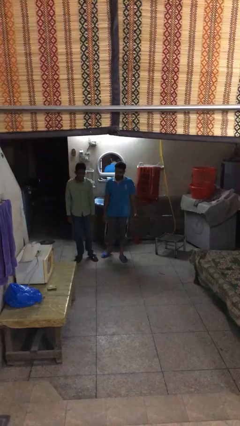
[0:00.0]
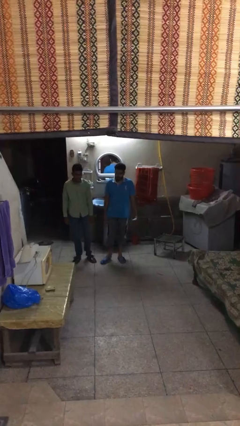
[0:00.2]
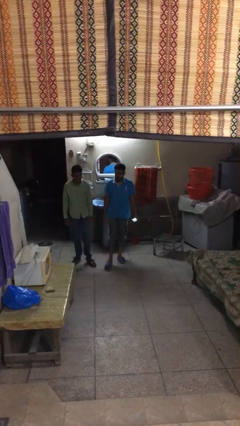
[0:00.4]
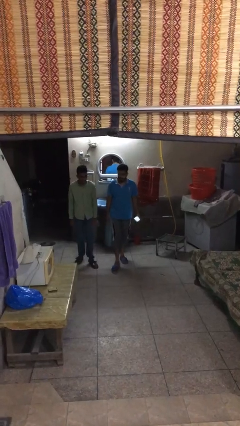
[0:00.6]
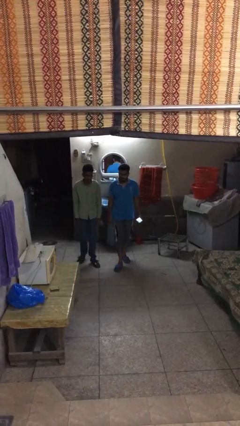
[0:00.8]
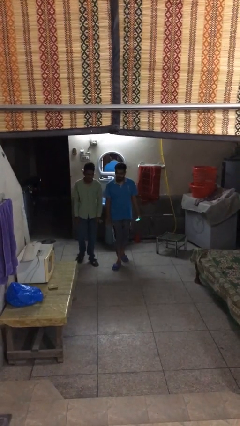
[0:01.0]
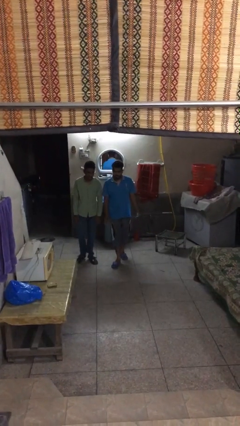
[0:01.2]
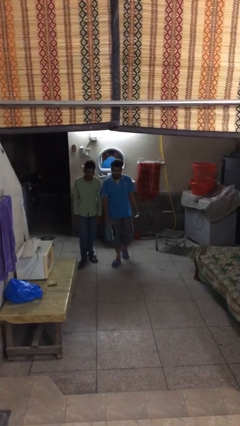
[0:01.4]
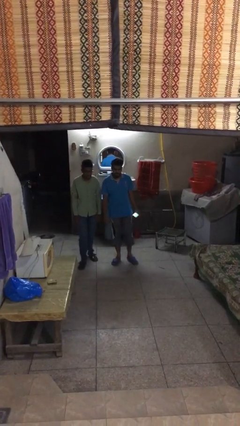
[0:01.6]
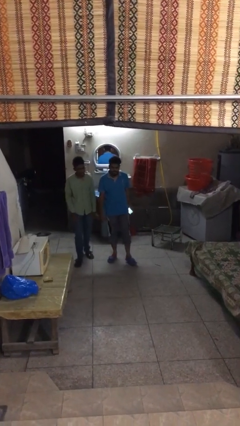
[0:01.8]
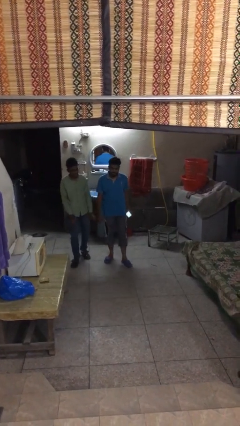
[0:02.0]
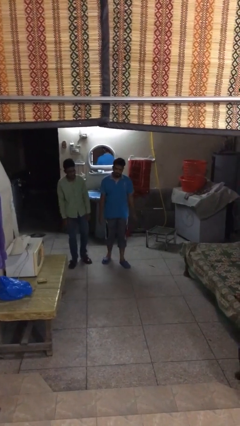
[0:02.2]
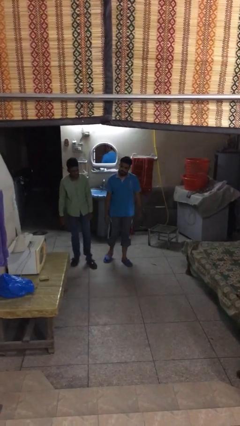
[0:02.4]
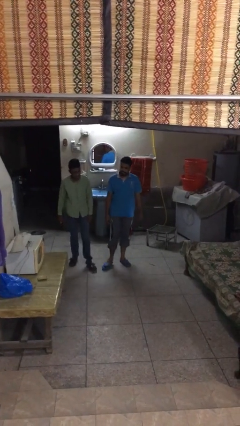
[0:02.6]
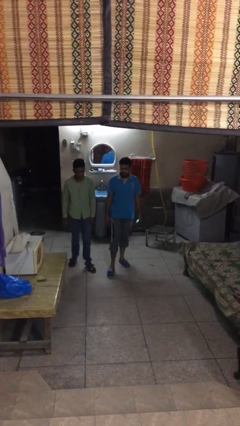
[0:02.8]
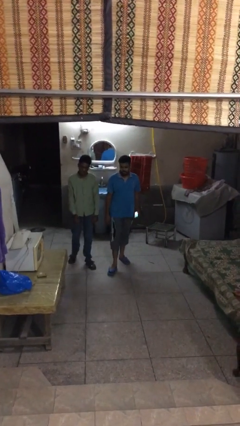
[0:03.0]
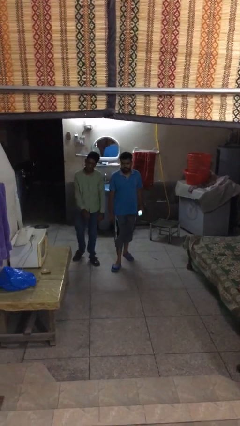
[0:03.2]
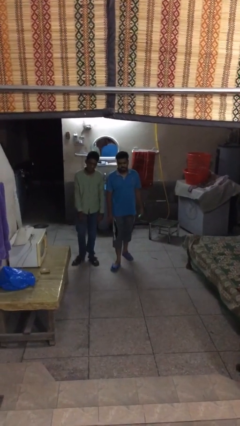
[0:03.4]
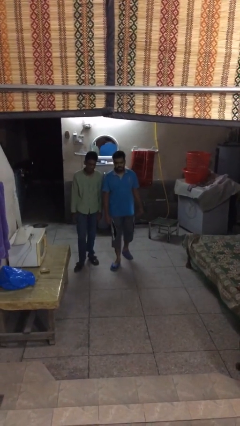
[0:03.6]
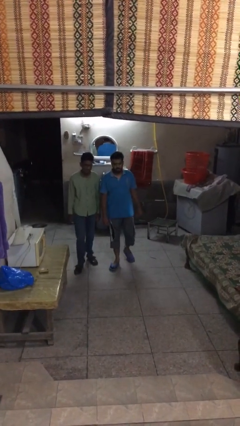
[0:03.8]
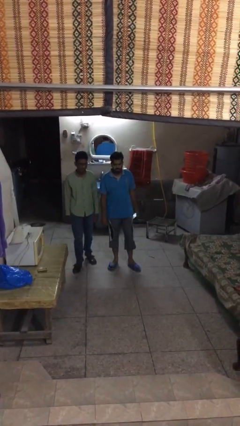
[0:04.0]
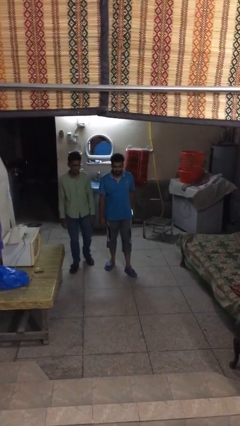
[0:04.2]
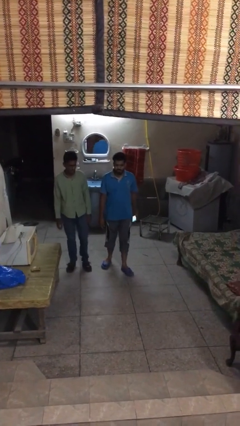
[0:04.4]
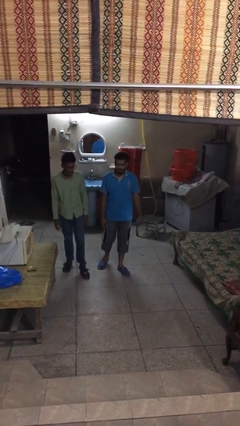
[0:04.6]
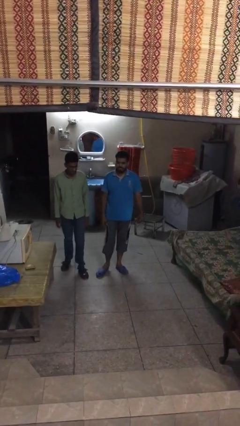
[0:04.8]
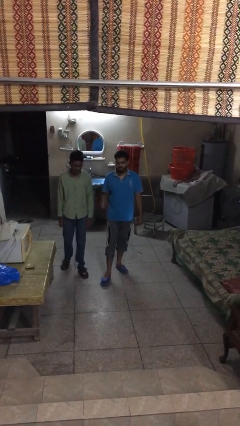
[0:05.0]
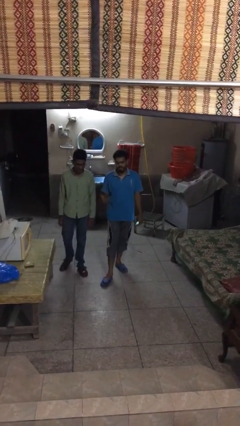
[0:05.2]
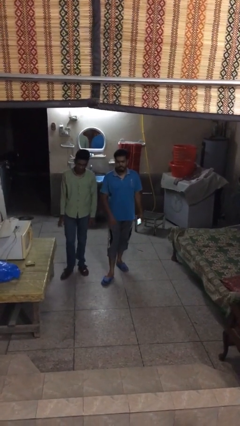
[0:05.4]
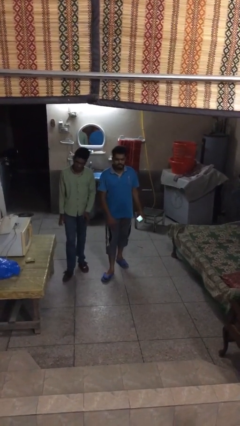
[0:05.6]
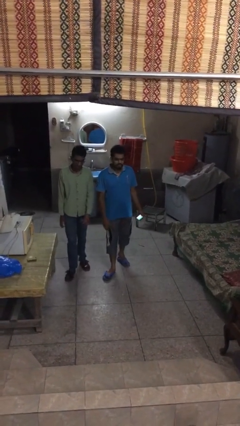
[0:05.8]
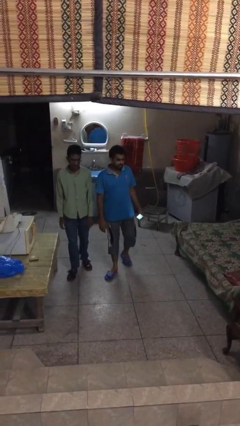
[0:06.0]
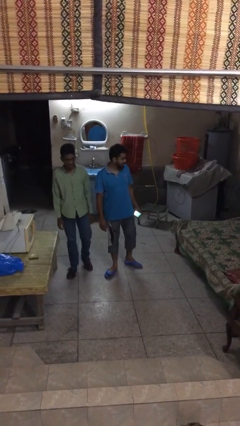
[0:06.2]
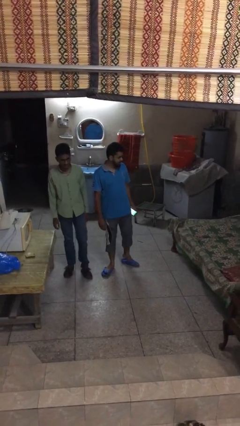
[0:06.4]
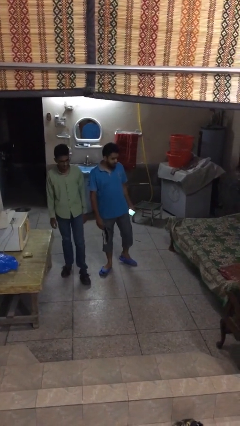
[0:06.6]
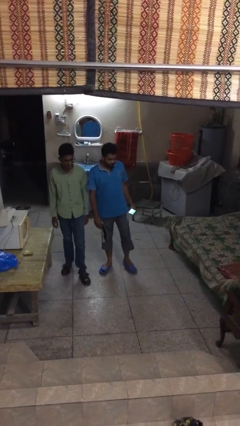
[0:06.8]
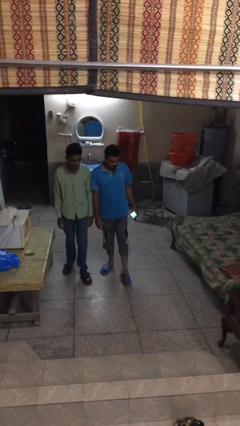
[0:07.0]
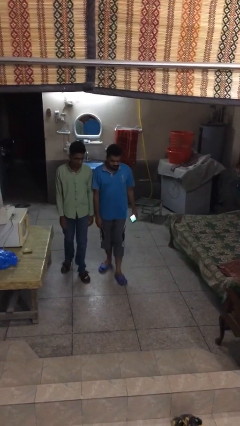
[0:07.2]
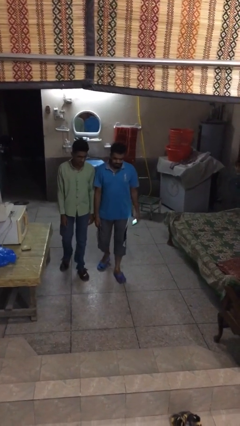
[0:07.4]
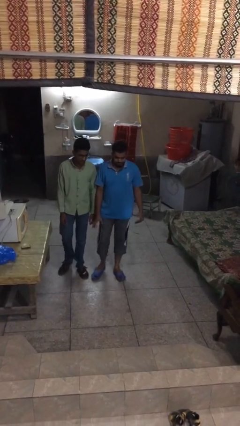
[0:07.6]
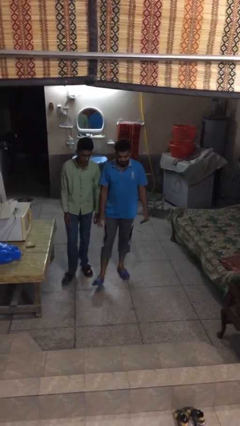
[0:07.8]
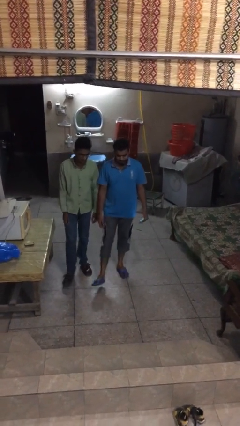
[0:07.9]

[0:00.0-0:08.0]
person talks to person

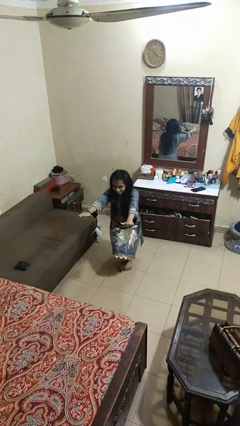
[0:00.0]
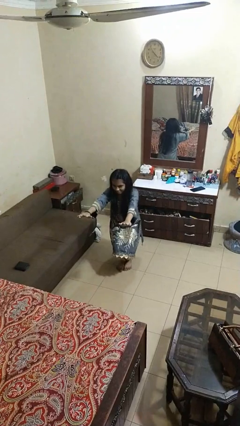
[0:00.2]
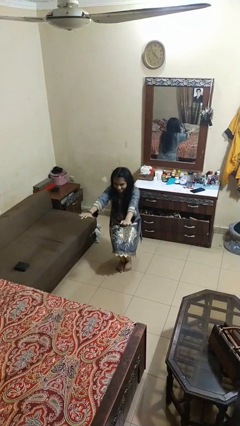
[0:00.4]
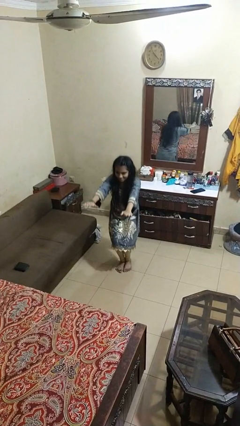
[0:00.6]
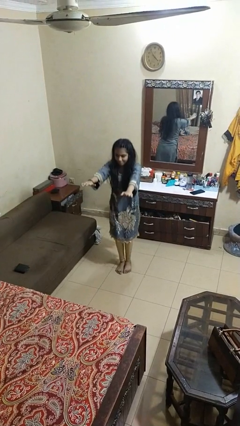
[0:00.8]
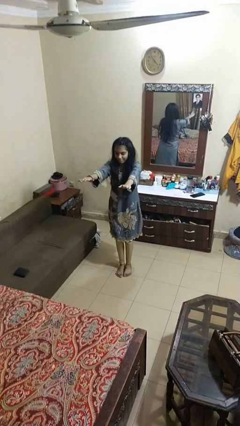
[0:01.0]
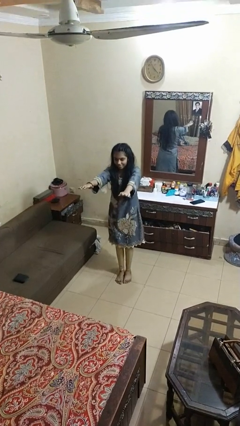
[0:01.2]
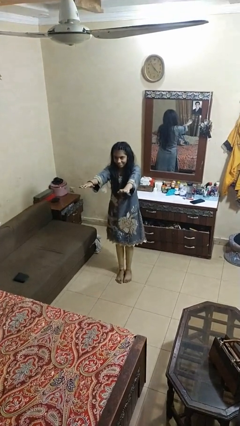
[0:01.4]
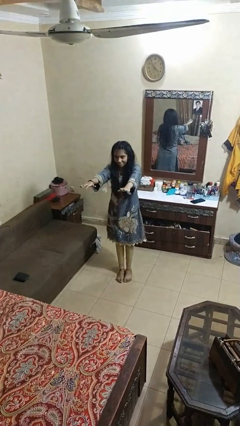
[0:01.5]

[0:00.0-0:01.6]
person stands up

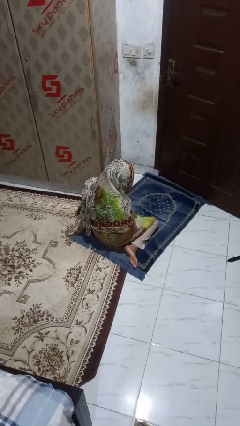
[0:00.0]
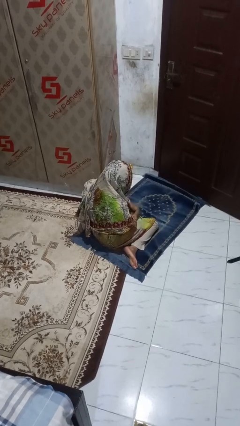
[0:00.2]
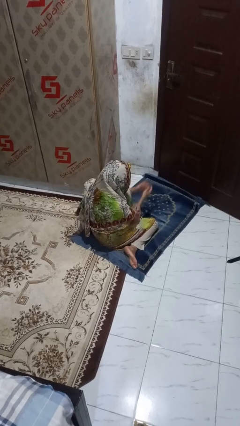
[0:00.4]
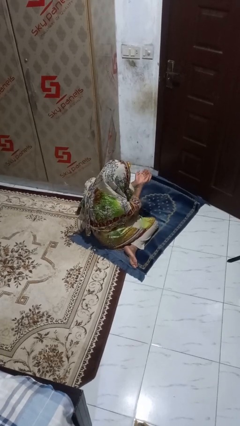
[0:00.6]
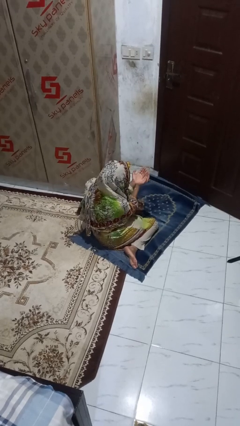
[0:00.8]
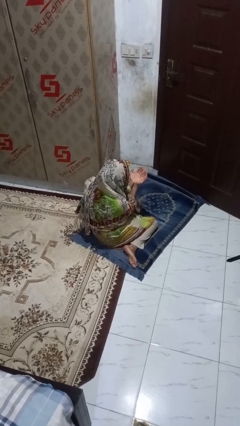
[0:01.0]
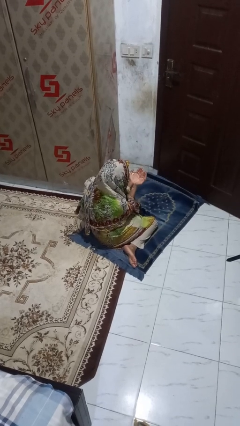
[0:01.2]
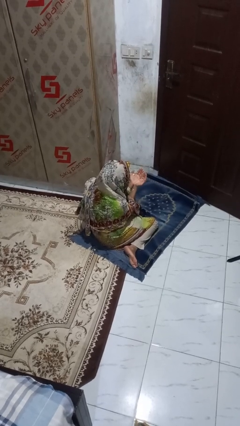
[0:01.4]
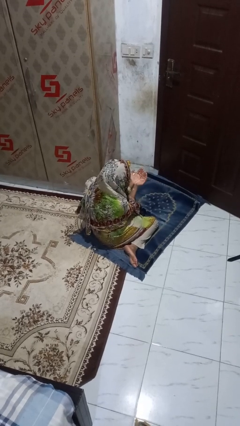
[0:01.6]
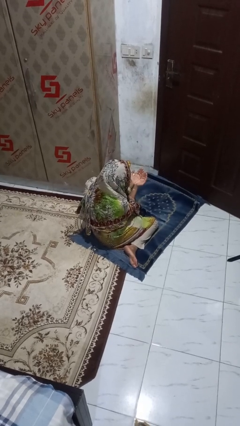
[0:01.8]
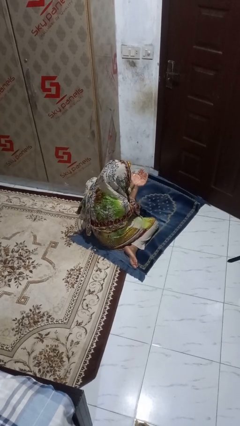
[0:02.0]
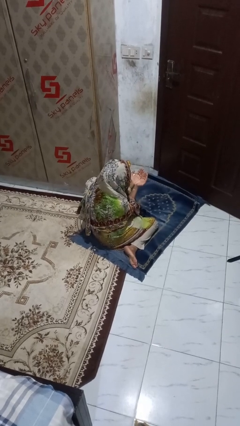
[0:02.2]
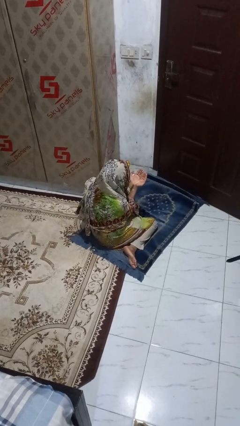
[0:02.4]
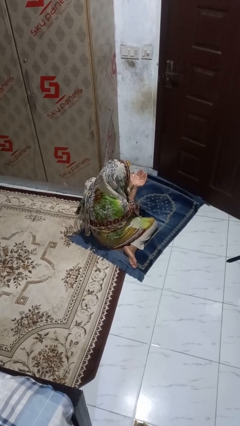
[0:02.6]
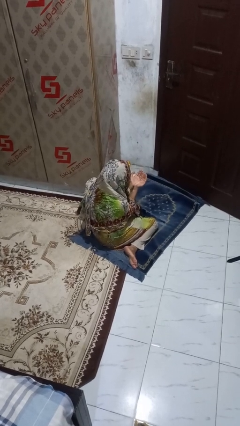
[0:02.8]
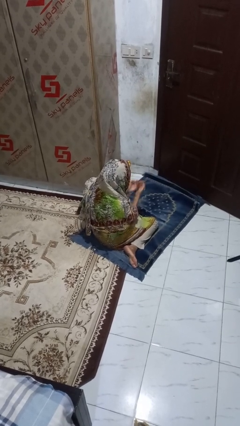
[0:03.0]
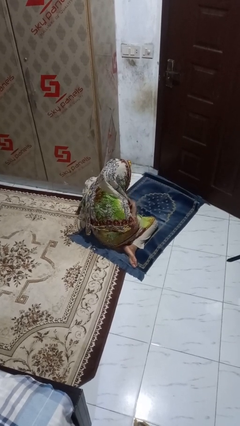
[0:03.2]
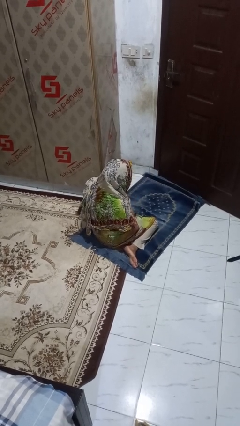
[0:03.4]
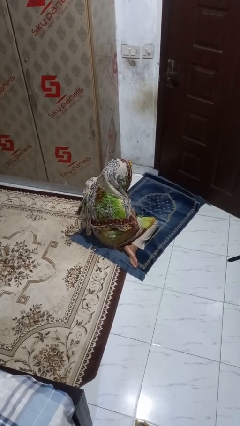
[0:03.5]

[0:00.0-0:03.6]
person prays

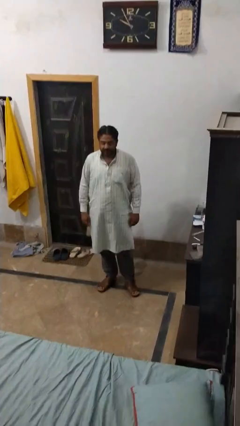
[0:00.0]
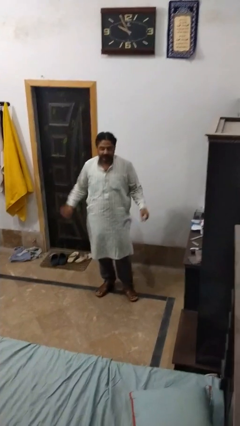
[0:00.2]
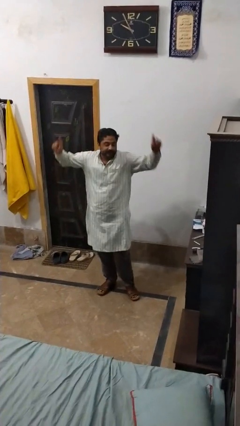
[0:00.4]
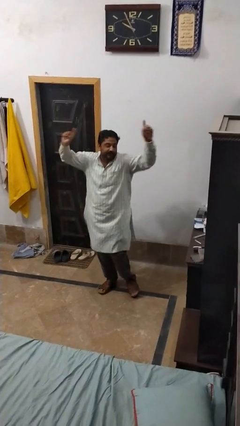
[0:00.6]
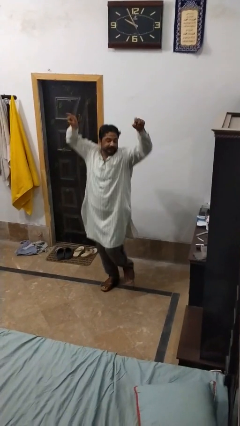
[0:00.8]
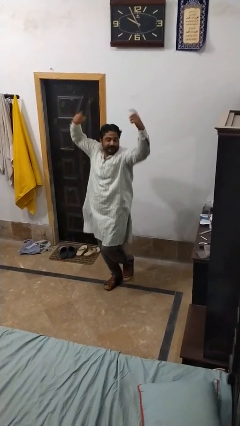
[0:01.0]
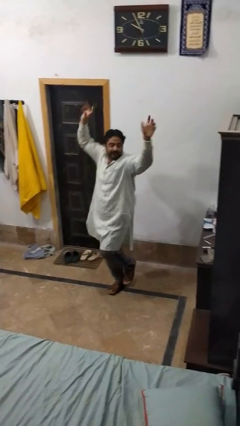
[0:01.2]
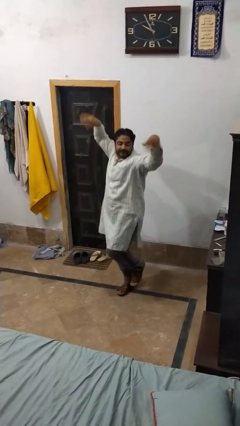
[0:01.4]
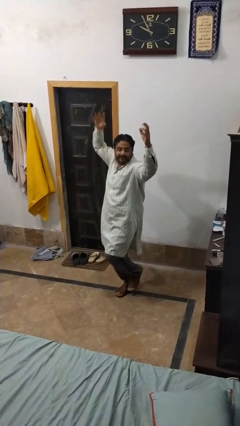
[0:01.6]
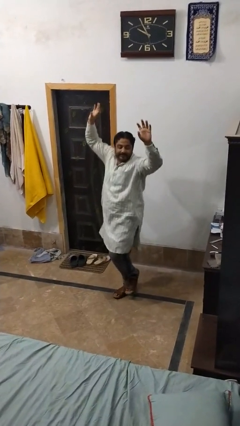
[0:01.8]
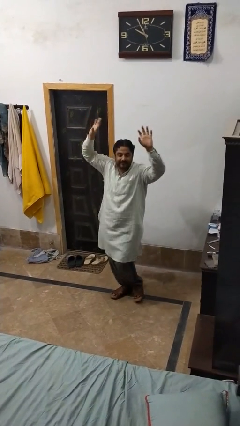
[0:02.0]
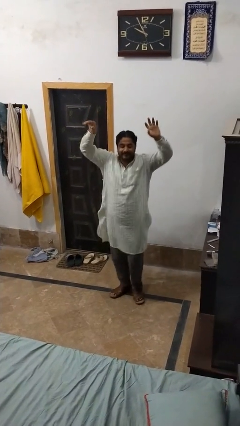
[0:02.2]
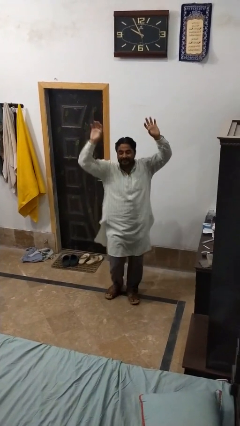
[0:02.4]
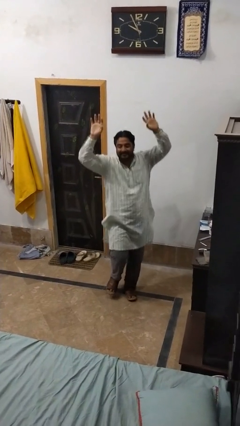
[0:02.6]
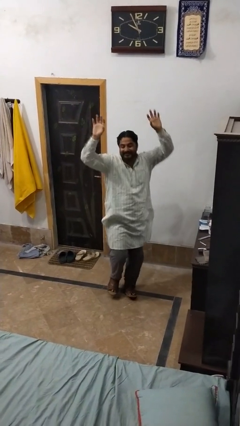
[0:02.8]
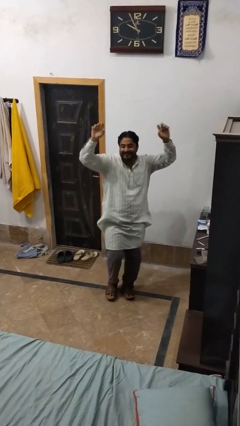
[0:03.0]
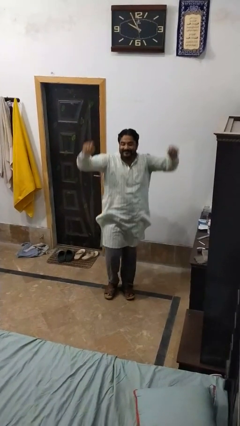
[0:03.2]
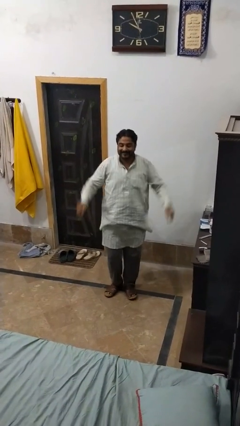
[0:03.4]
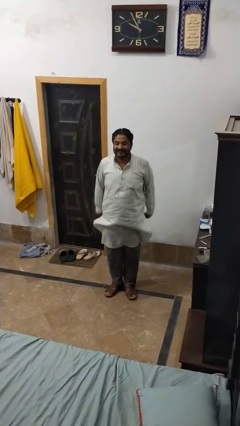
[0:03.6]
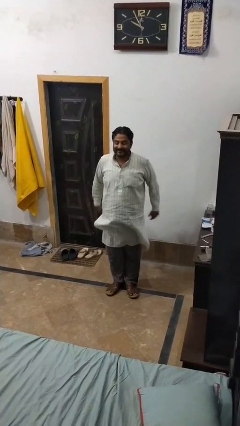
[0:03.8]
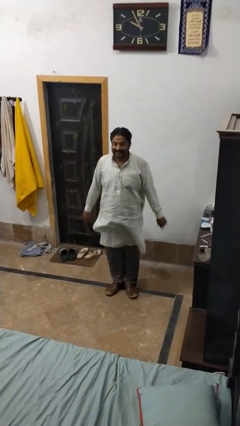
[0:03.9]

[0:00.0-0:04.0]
person dances in place
